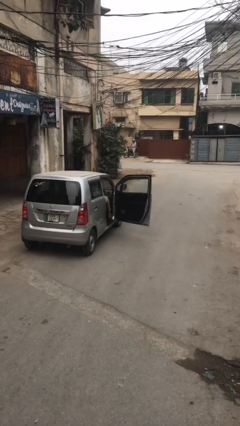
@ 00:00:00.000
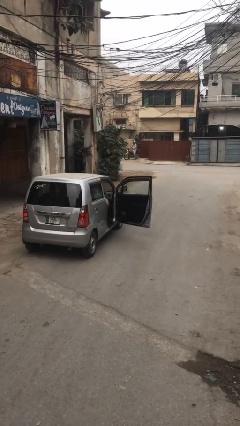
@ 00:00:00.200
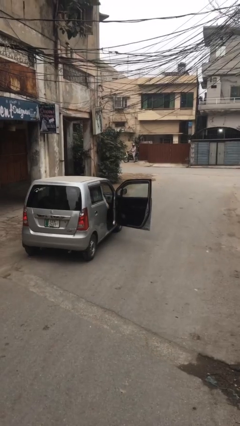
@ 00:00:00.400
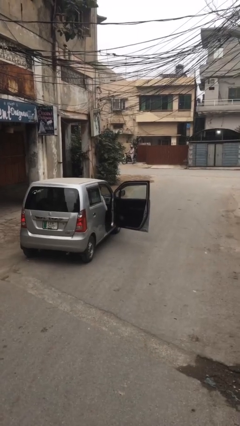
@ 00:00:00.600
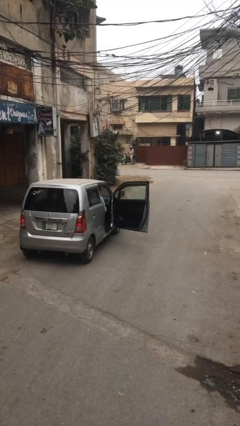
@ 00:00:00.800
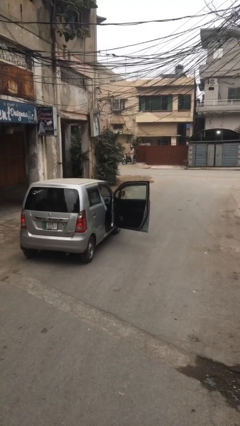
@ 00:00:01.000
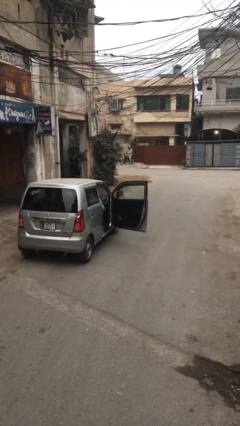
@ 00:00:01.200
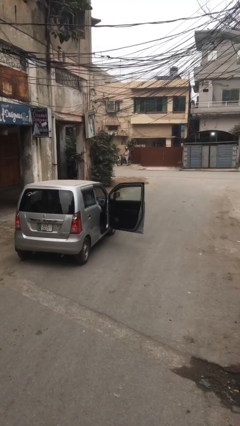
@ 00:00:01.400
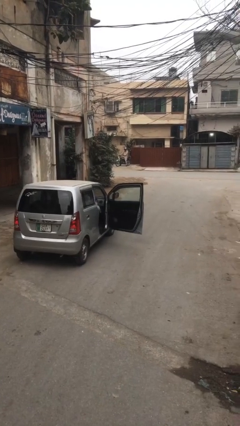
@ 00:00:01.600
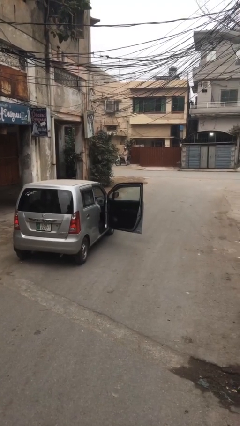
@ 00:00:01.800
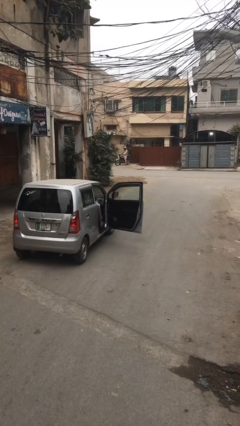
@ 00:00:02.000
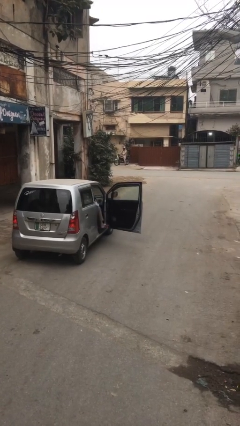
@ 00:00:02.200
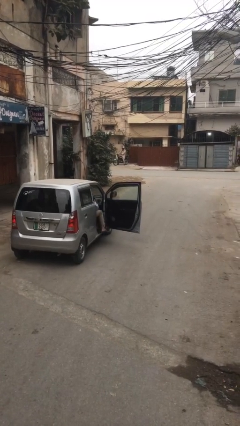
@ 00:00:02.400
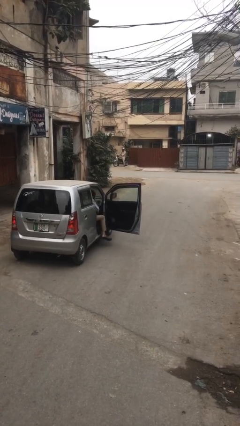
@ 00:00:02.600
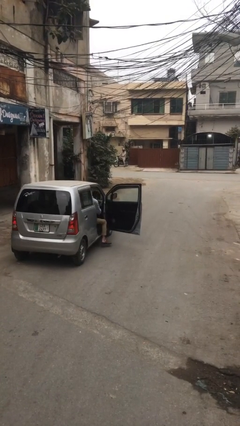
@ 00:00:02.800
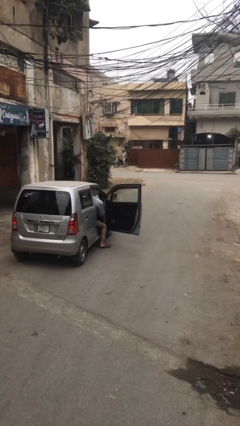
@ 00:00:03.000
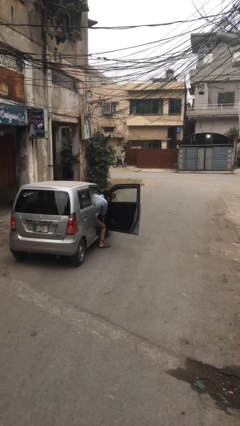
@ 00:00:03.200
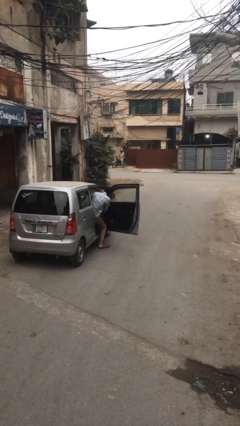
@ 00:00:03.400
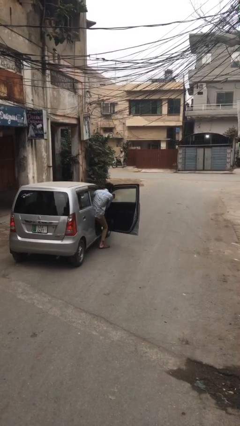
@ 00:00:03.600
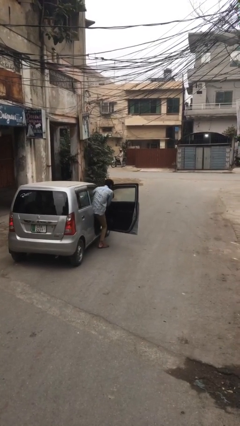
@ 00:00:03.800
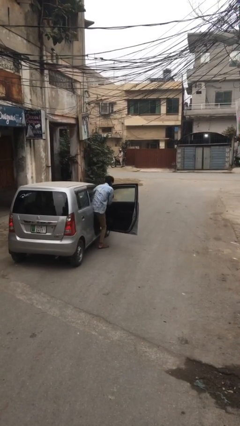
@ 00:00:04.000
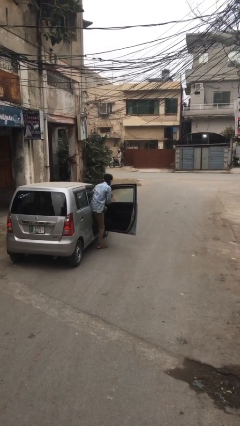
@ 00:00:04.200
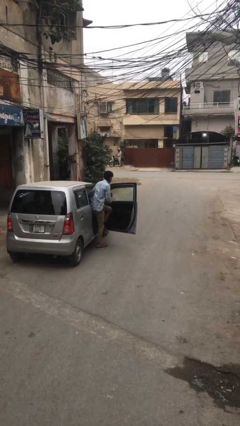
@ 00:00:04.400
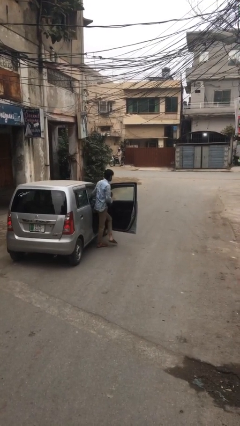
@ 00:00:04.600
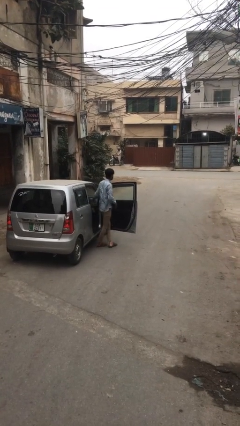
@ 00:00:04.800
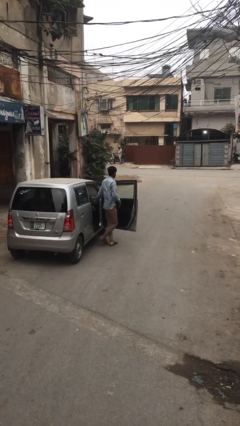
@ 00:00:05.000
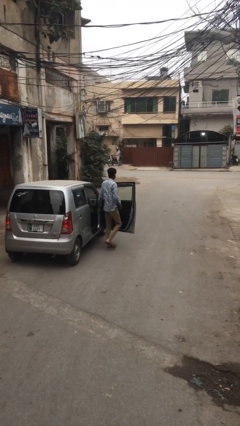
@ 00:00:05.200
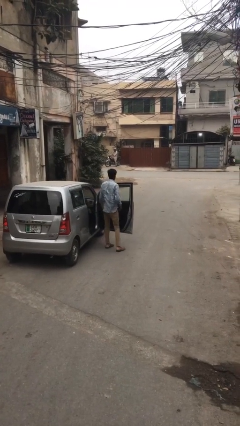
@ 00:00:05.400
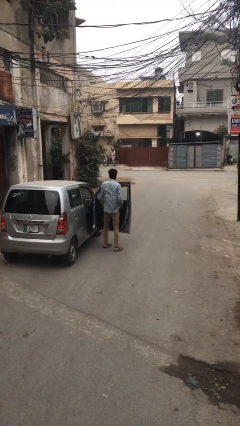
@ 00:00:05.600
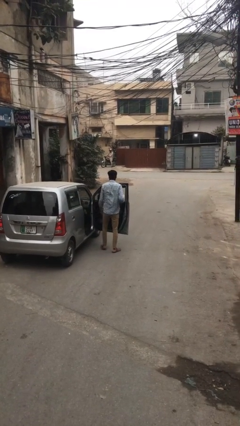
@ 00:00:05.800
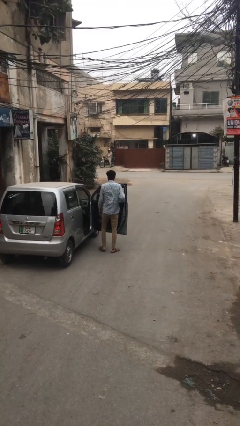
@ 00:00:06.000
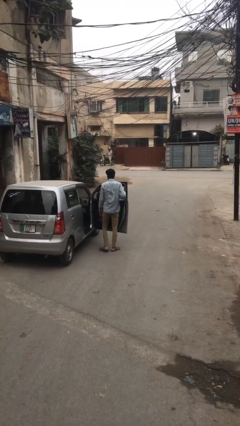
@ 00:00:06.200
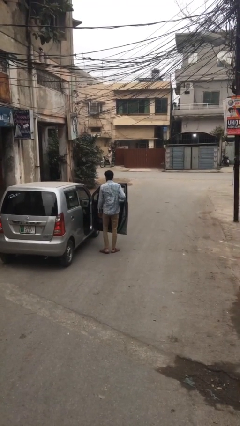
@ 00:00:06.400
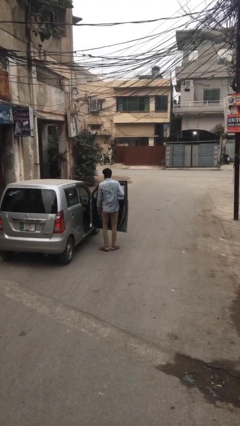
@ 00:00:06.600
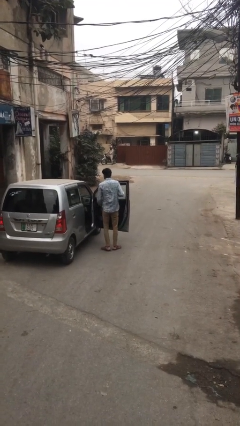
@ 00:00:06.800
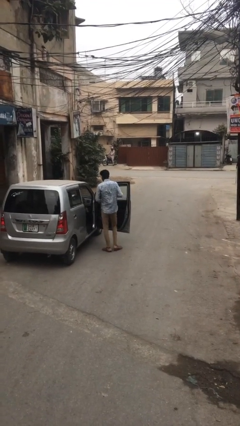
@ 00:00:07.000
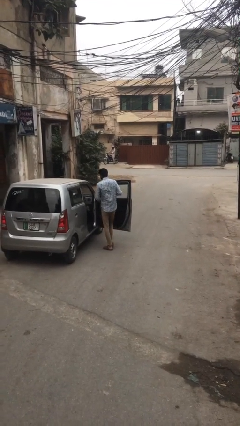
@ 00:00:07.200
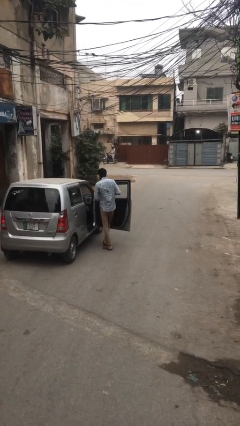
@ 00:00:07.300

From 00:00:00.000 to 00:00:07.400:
person exits car

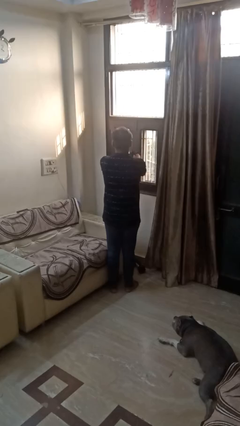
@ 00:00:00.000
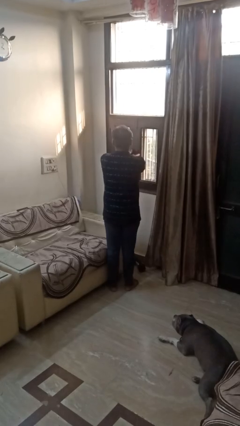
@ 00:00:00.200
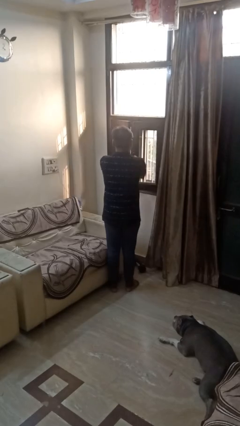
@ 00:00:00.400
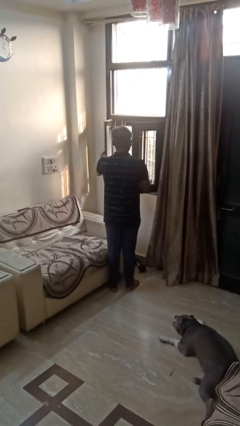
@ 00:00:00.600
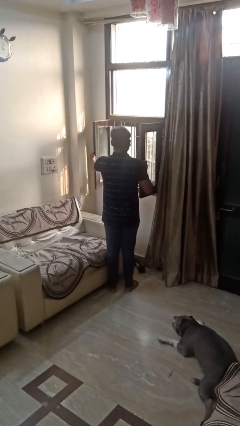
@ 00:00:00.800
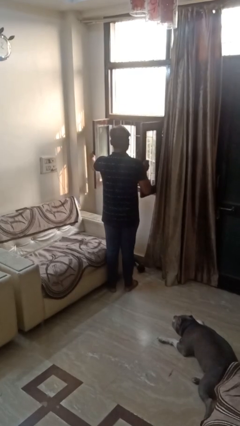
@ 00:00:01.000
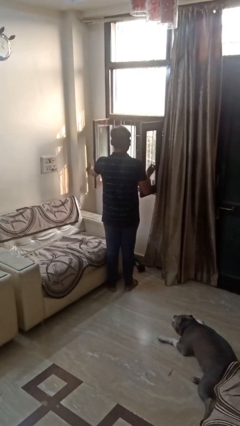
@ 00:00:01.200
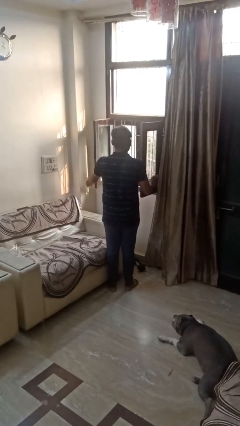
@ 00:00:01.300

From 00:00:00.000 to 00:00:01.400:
person opens home window

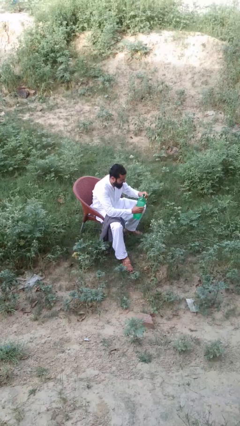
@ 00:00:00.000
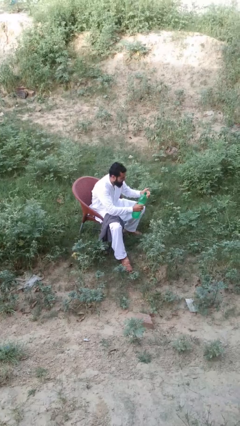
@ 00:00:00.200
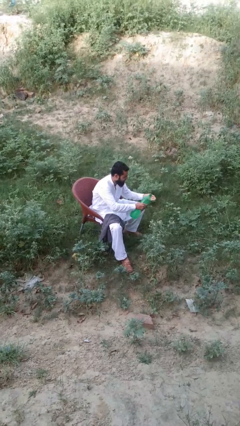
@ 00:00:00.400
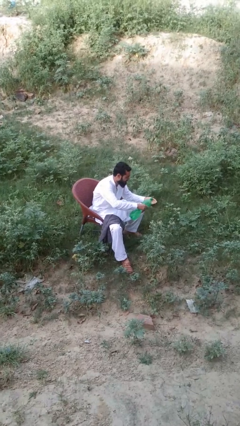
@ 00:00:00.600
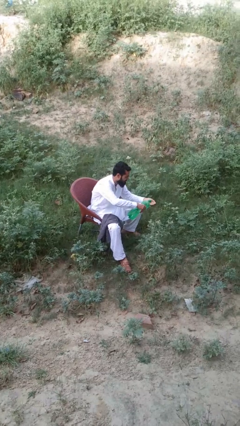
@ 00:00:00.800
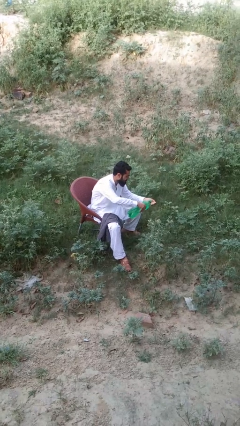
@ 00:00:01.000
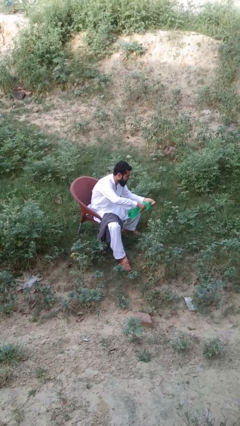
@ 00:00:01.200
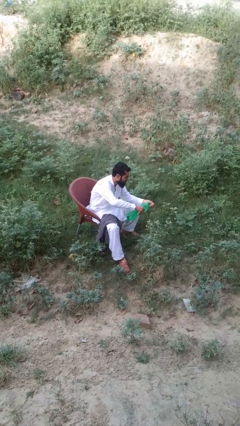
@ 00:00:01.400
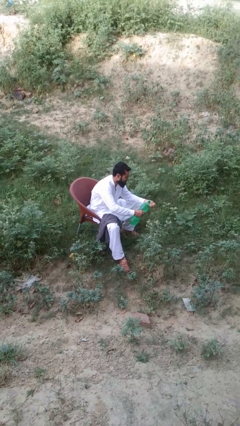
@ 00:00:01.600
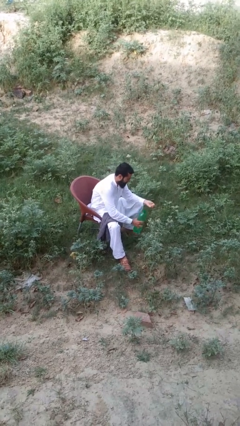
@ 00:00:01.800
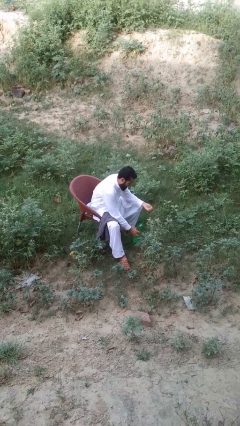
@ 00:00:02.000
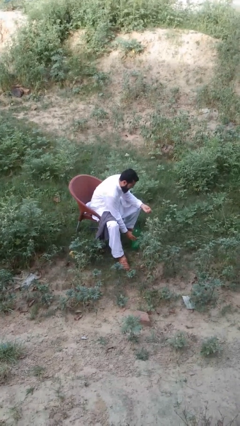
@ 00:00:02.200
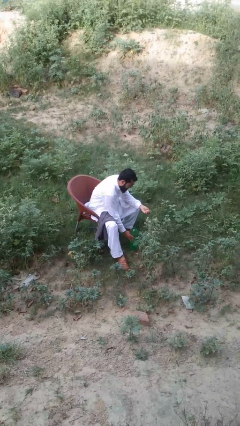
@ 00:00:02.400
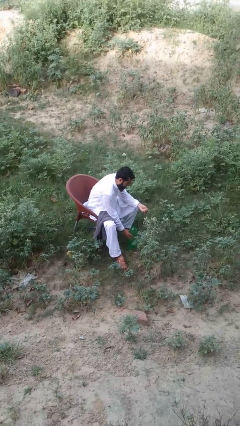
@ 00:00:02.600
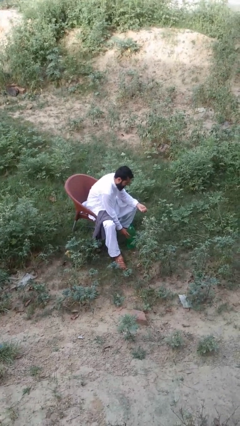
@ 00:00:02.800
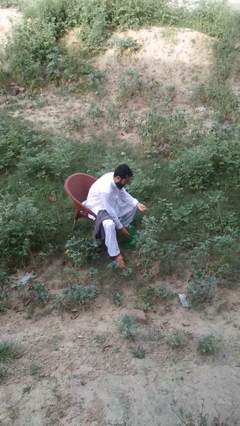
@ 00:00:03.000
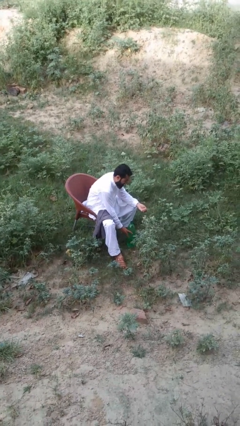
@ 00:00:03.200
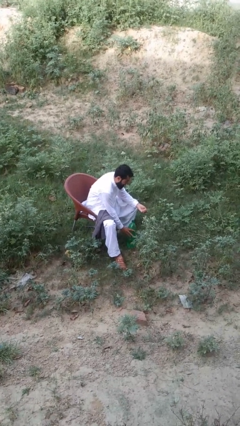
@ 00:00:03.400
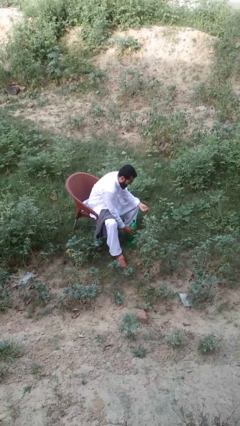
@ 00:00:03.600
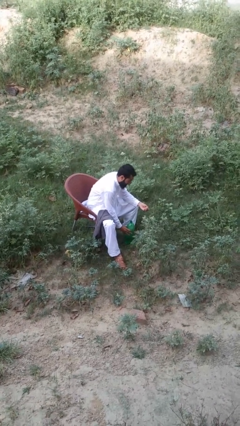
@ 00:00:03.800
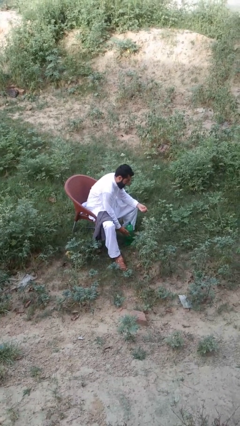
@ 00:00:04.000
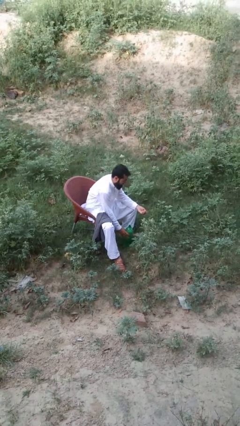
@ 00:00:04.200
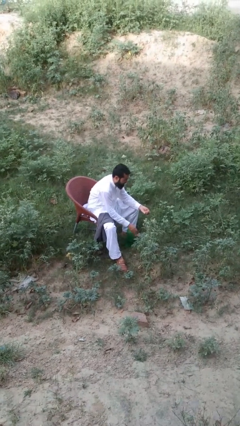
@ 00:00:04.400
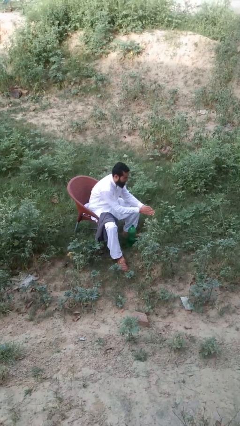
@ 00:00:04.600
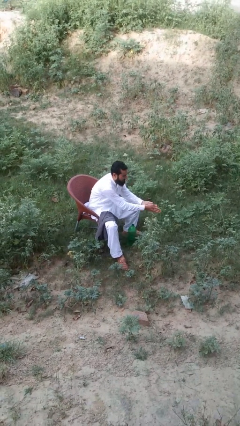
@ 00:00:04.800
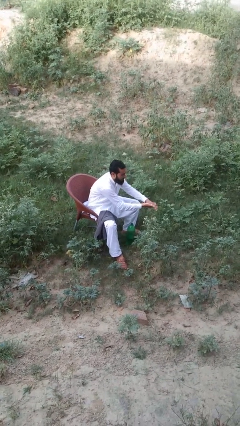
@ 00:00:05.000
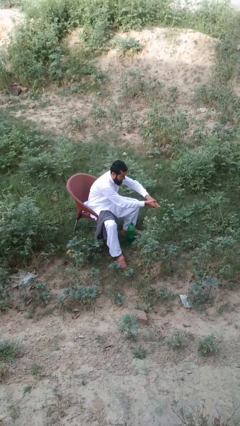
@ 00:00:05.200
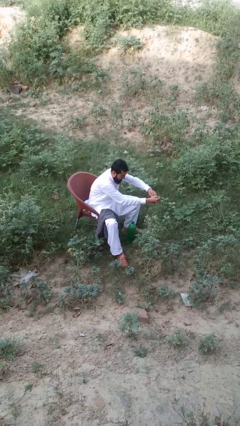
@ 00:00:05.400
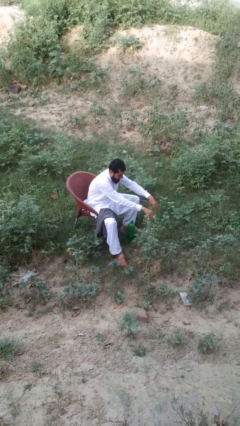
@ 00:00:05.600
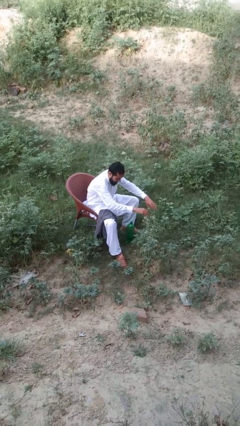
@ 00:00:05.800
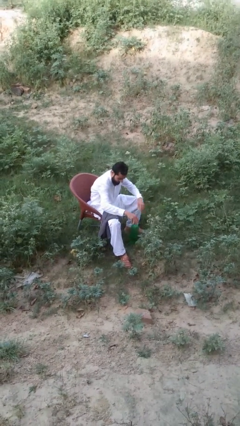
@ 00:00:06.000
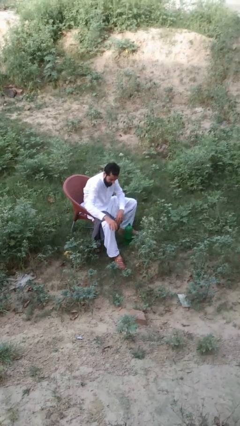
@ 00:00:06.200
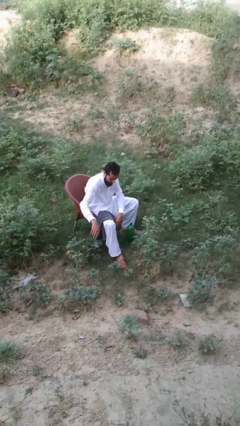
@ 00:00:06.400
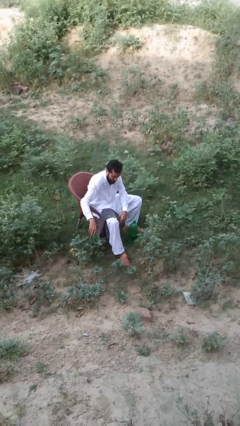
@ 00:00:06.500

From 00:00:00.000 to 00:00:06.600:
person washes hands

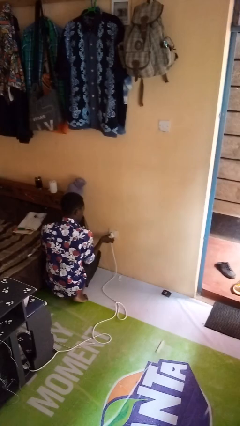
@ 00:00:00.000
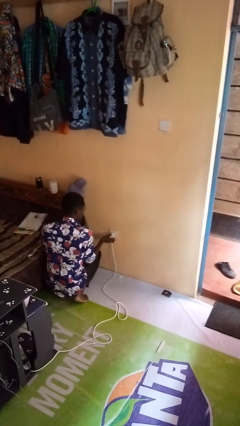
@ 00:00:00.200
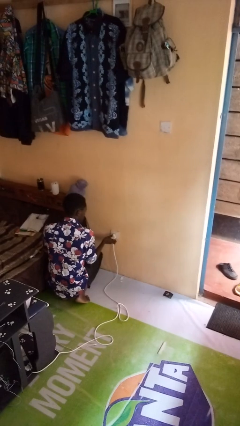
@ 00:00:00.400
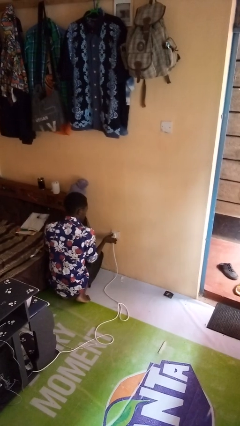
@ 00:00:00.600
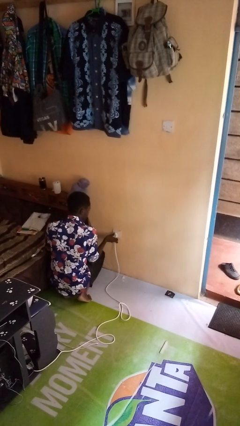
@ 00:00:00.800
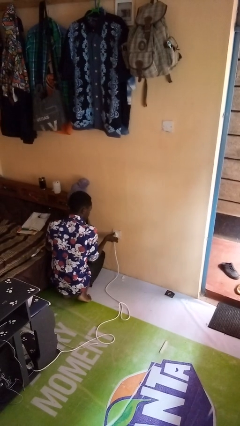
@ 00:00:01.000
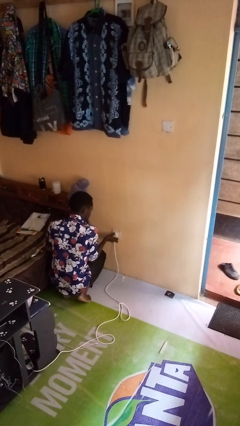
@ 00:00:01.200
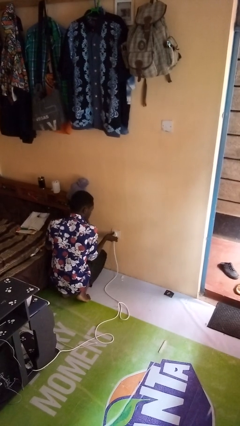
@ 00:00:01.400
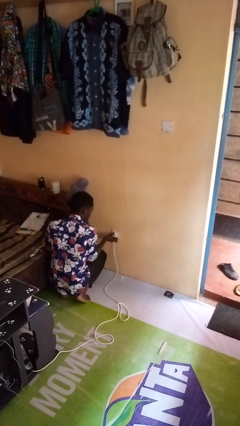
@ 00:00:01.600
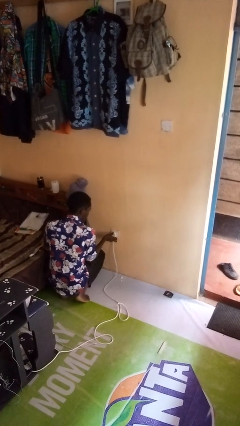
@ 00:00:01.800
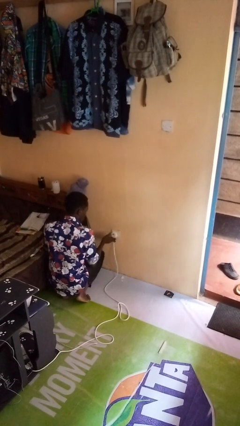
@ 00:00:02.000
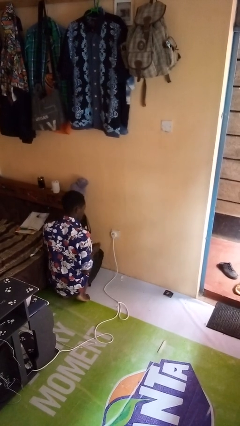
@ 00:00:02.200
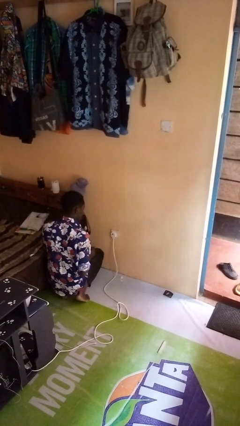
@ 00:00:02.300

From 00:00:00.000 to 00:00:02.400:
person plugs into electrical socket
